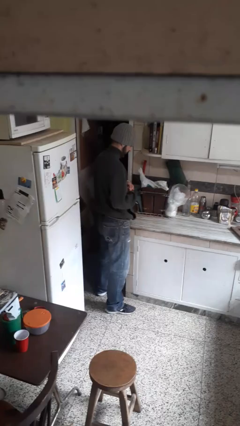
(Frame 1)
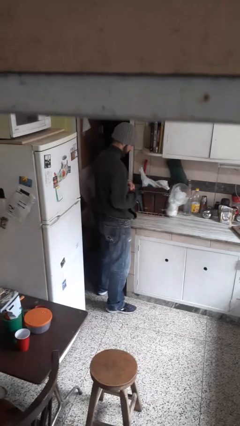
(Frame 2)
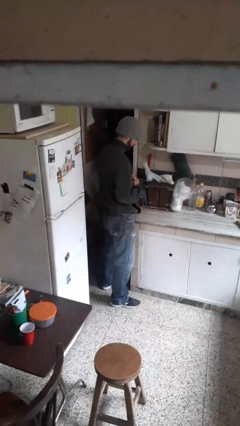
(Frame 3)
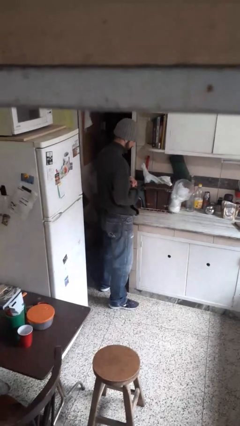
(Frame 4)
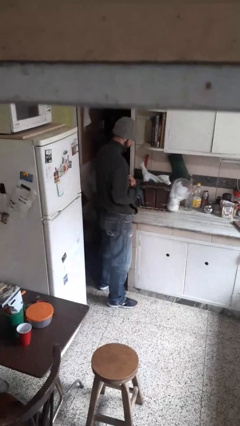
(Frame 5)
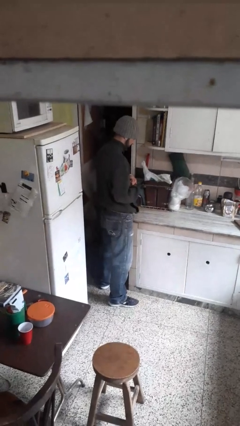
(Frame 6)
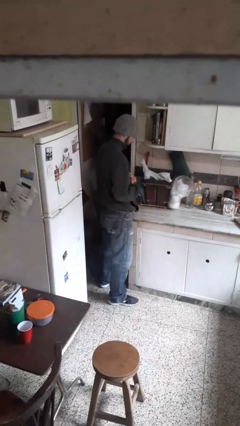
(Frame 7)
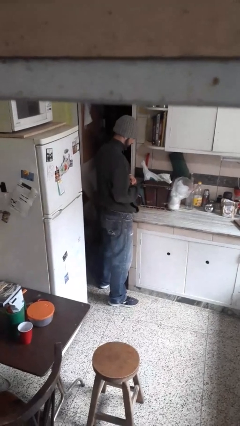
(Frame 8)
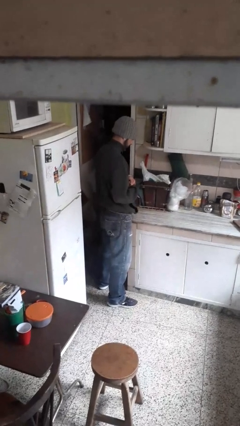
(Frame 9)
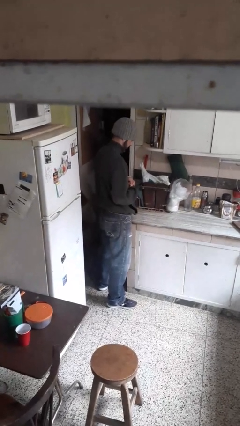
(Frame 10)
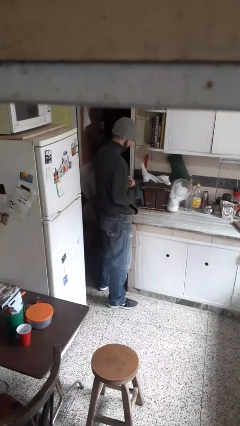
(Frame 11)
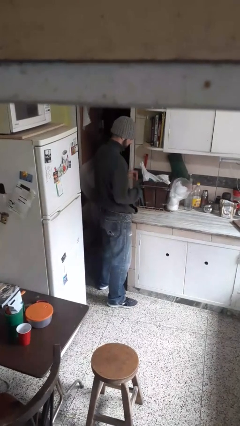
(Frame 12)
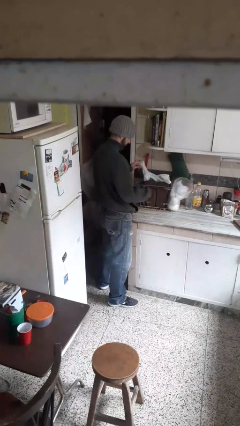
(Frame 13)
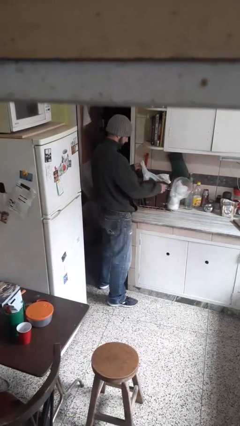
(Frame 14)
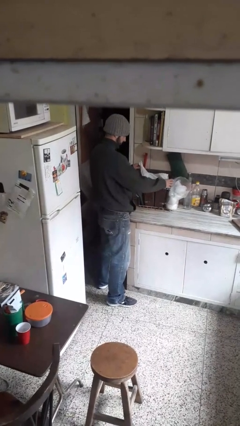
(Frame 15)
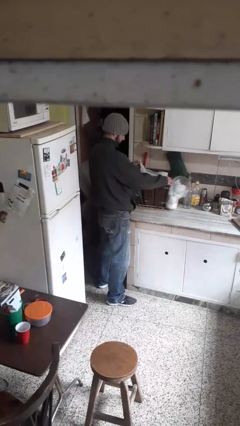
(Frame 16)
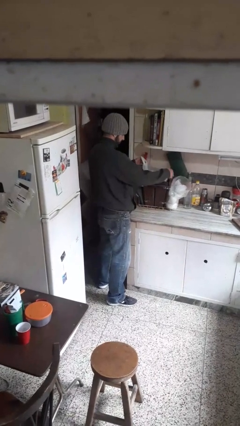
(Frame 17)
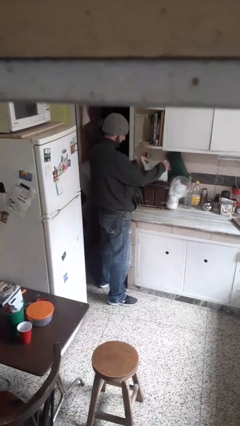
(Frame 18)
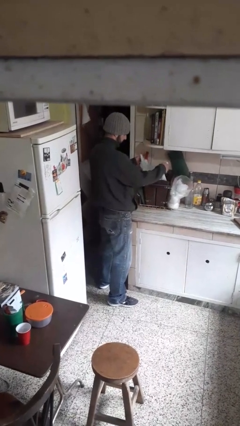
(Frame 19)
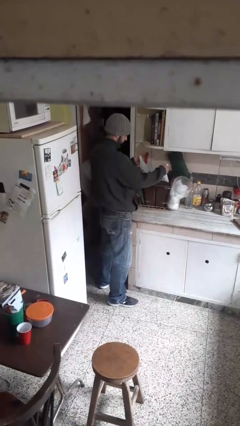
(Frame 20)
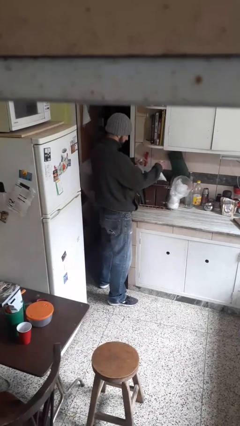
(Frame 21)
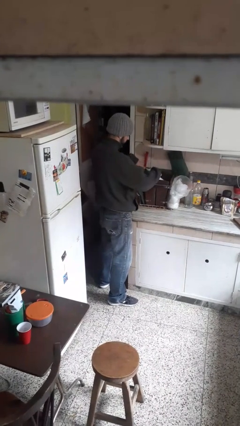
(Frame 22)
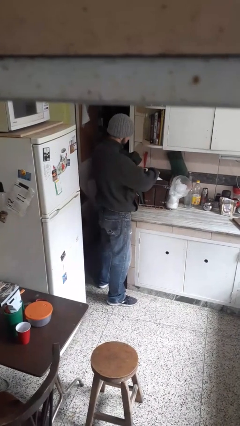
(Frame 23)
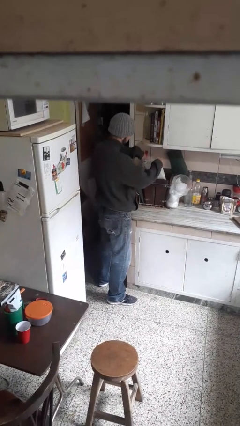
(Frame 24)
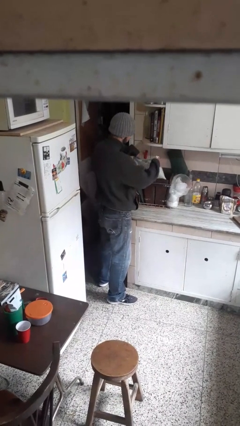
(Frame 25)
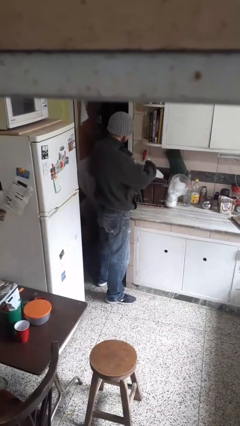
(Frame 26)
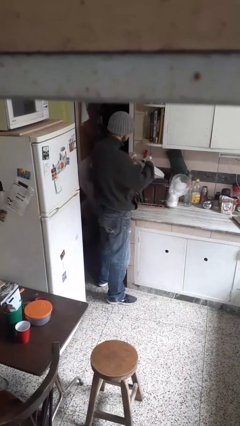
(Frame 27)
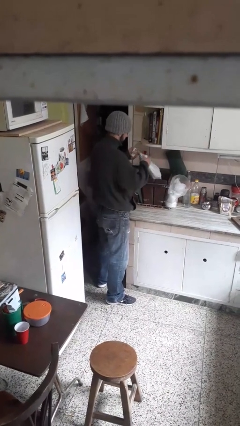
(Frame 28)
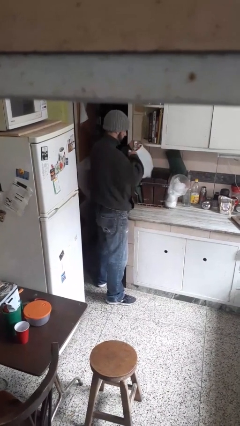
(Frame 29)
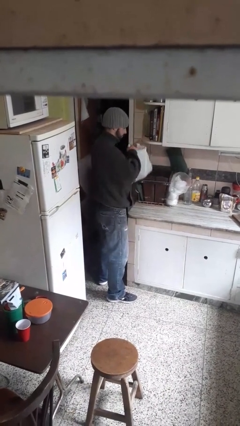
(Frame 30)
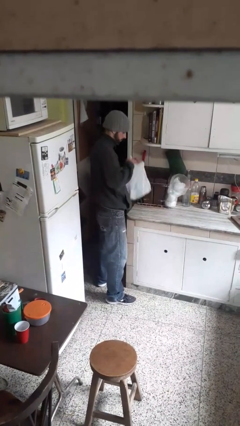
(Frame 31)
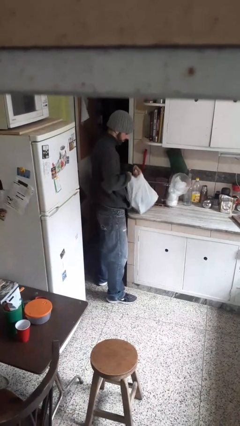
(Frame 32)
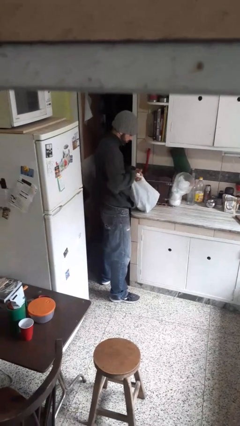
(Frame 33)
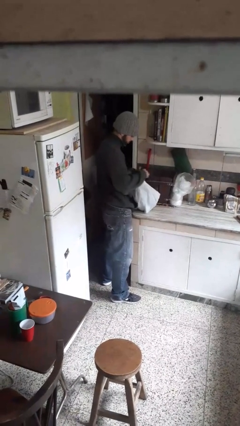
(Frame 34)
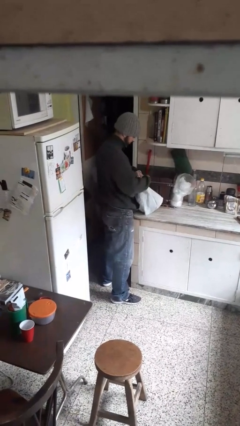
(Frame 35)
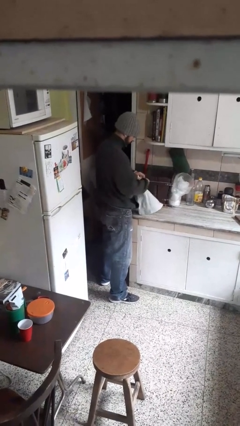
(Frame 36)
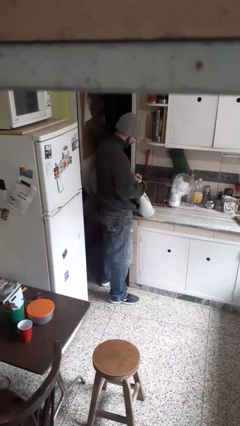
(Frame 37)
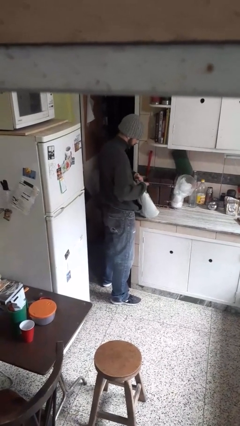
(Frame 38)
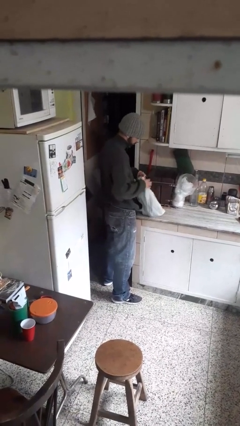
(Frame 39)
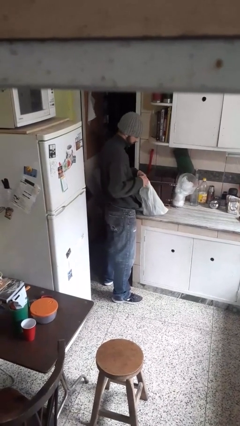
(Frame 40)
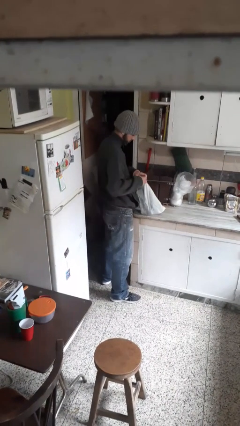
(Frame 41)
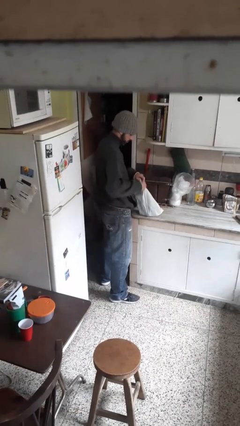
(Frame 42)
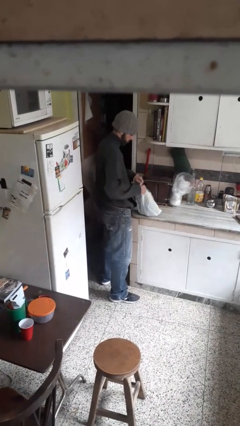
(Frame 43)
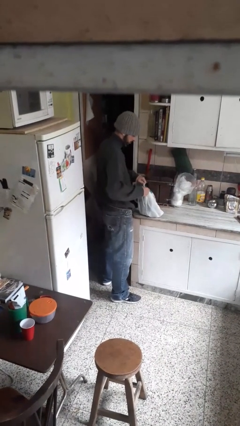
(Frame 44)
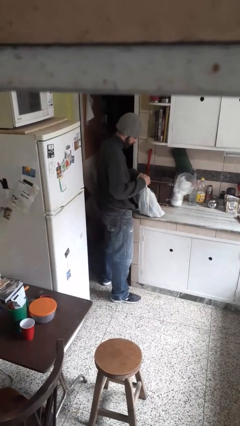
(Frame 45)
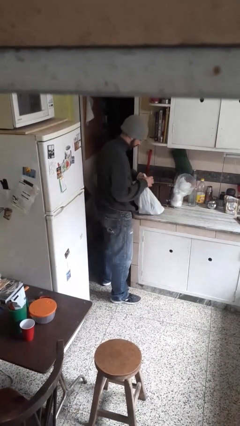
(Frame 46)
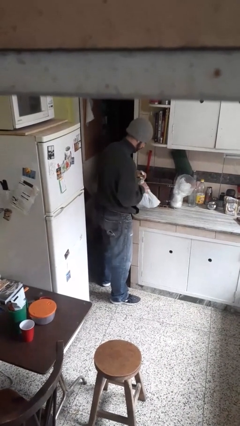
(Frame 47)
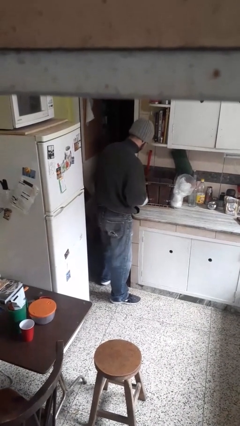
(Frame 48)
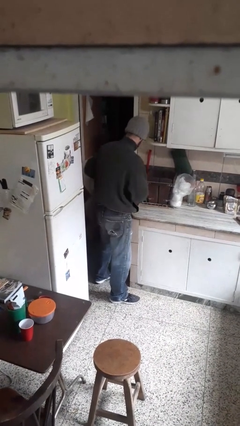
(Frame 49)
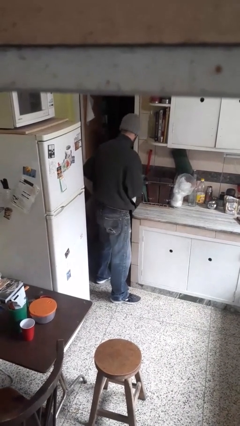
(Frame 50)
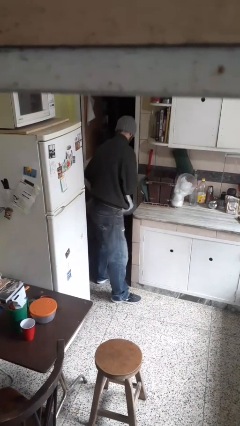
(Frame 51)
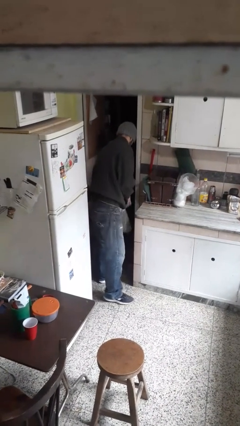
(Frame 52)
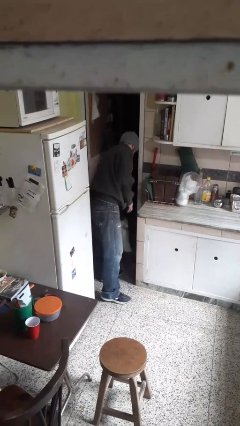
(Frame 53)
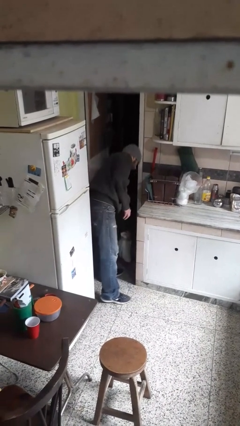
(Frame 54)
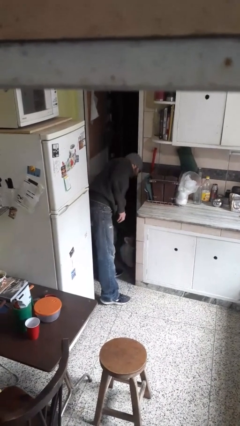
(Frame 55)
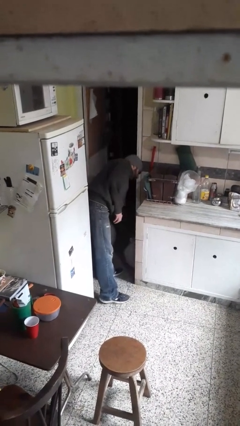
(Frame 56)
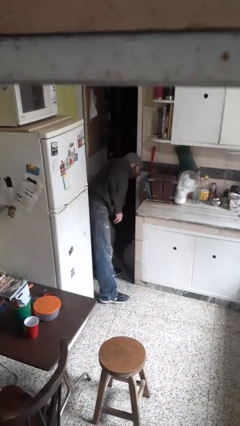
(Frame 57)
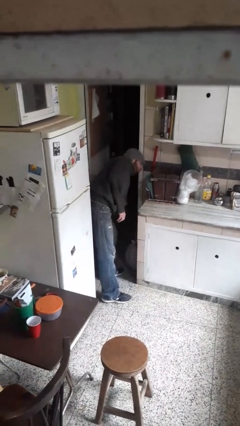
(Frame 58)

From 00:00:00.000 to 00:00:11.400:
person removes trashbag from trashcan

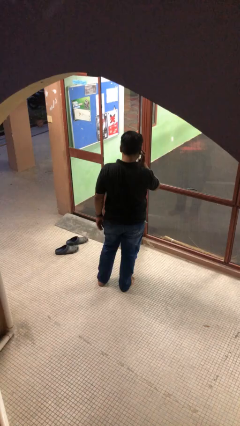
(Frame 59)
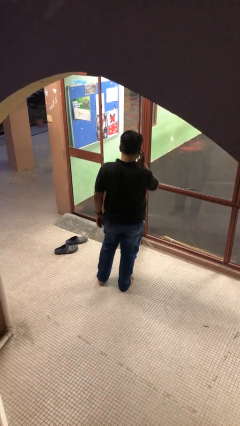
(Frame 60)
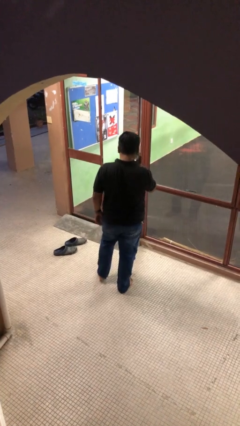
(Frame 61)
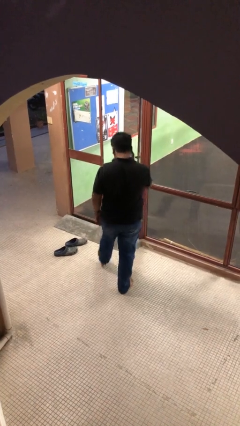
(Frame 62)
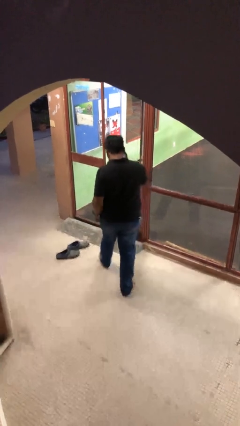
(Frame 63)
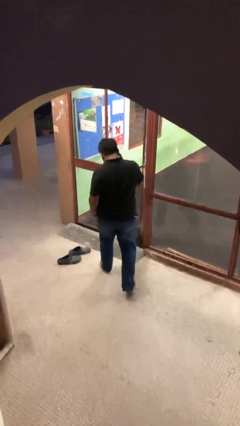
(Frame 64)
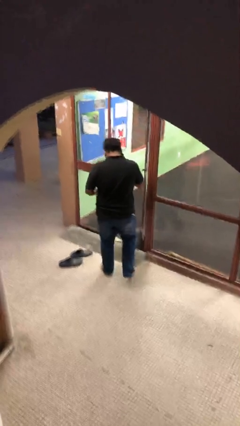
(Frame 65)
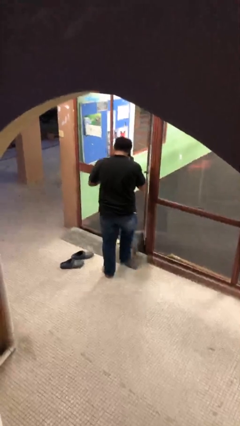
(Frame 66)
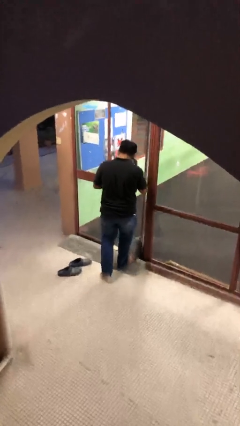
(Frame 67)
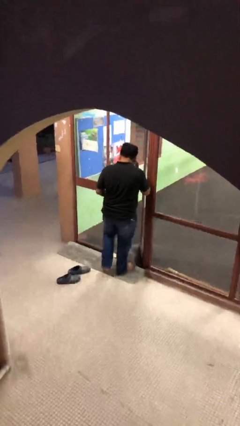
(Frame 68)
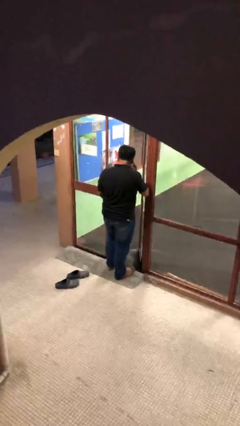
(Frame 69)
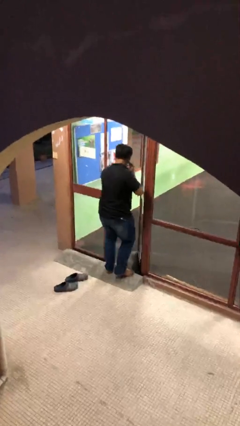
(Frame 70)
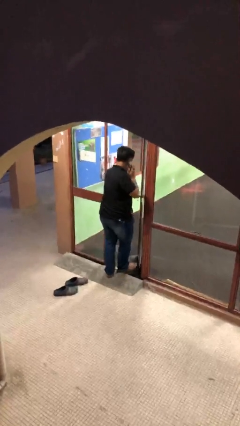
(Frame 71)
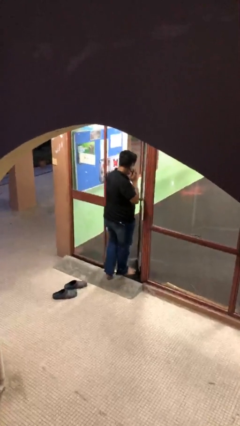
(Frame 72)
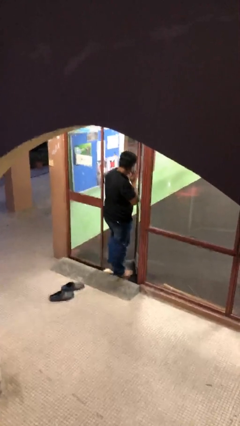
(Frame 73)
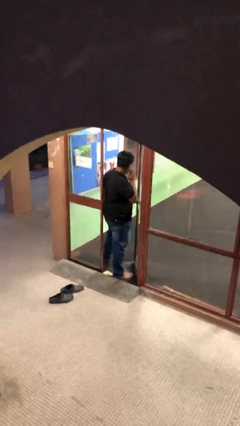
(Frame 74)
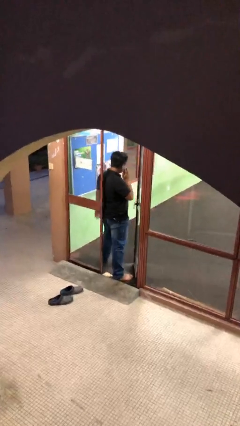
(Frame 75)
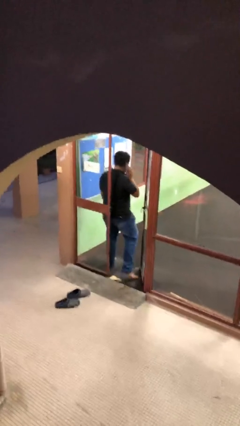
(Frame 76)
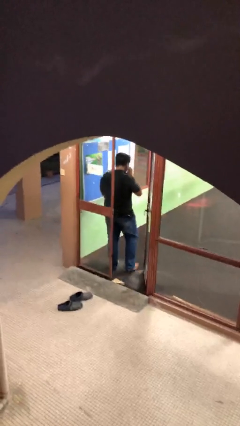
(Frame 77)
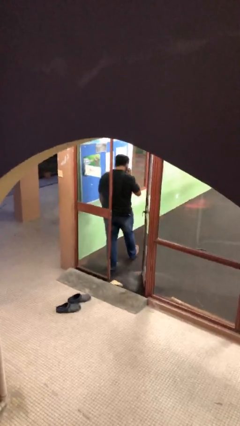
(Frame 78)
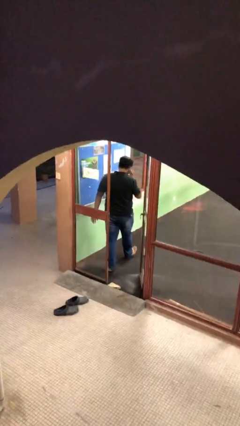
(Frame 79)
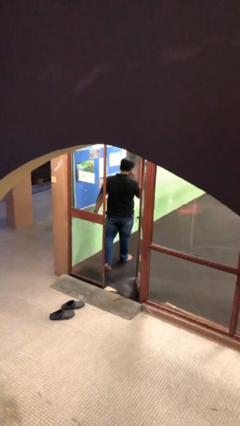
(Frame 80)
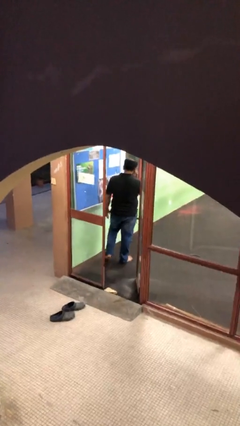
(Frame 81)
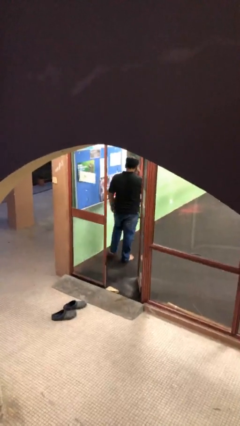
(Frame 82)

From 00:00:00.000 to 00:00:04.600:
person exits scene through structure

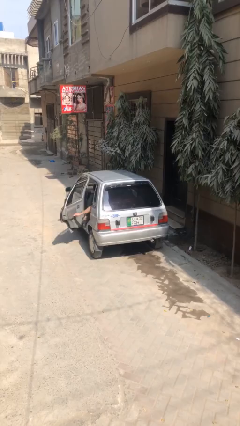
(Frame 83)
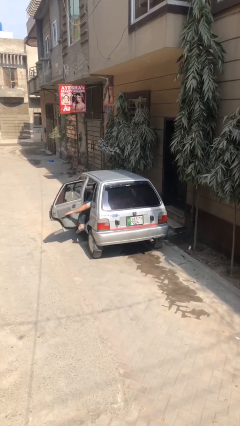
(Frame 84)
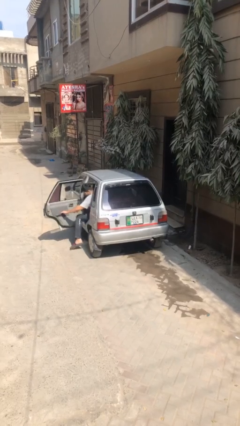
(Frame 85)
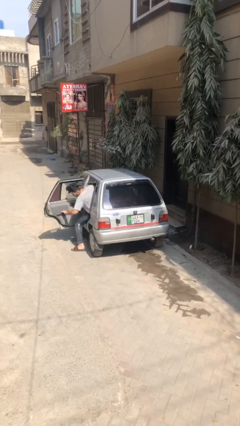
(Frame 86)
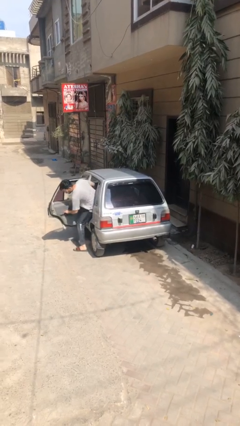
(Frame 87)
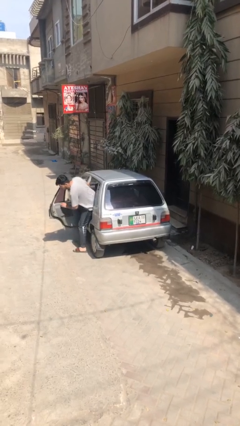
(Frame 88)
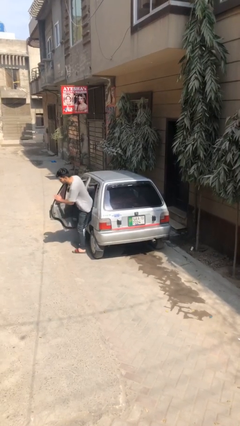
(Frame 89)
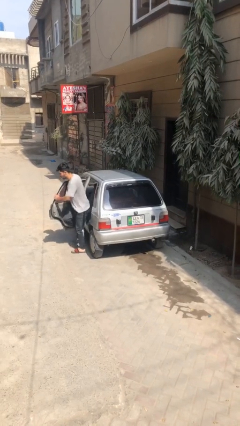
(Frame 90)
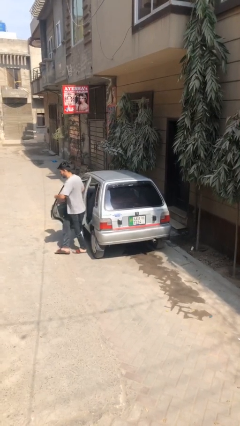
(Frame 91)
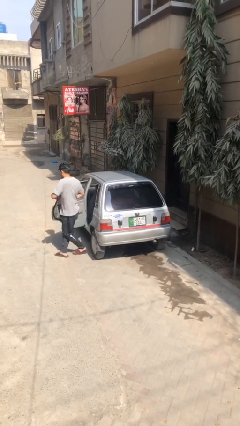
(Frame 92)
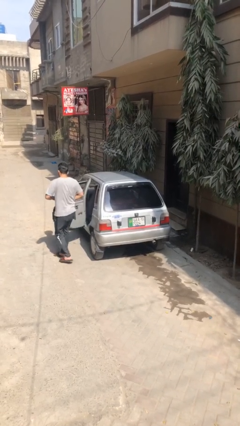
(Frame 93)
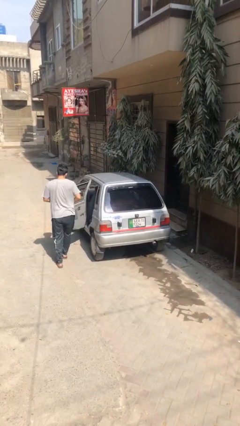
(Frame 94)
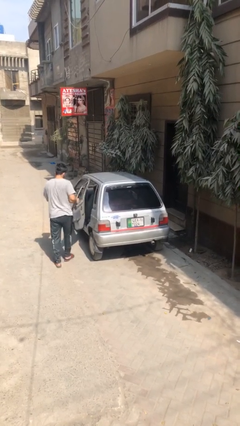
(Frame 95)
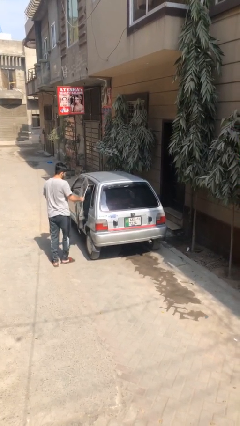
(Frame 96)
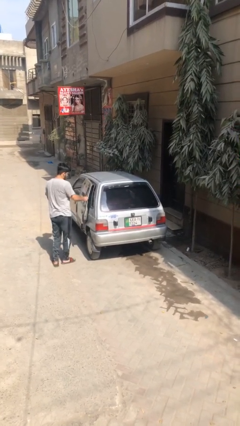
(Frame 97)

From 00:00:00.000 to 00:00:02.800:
car drops off person
